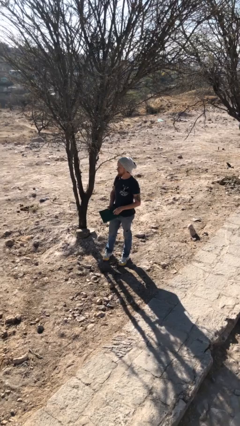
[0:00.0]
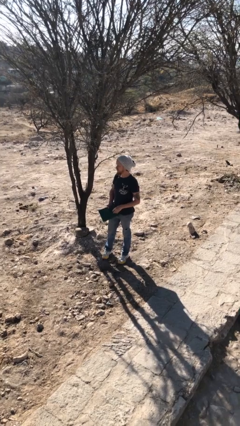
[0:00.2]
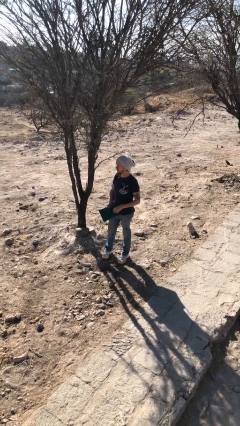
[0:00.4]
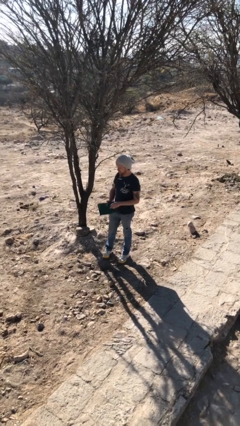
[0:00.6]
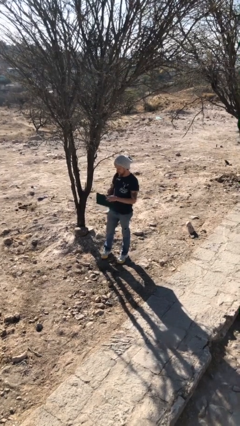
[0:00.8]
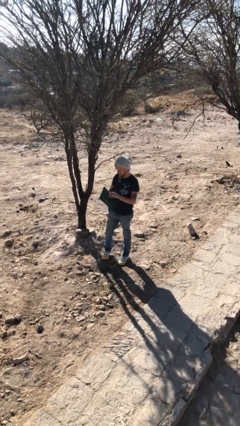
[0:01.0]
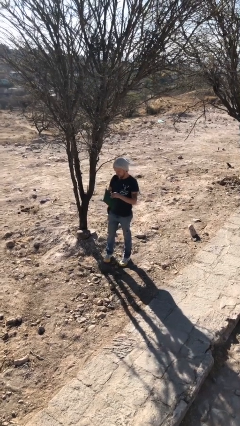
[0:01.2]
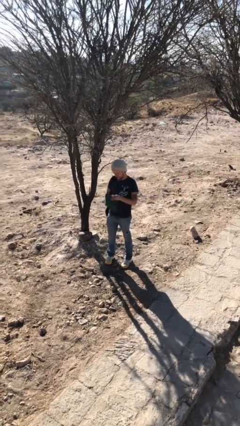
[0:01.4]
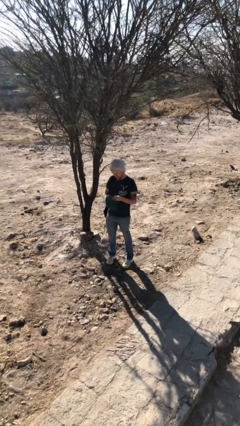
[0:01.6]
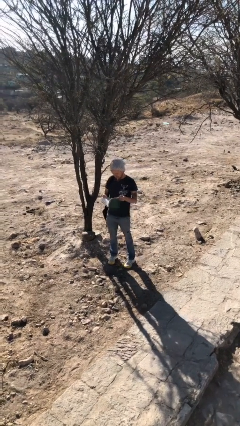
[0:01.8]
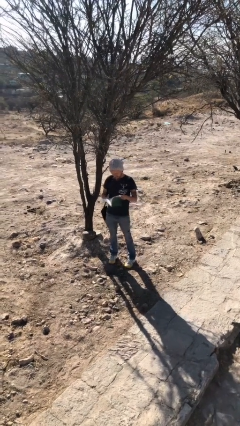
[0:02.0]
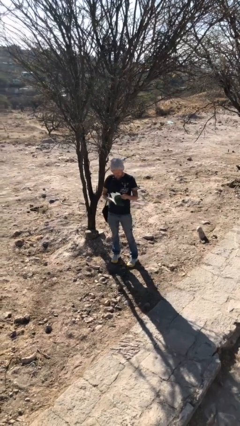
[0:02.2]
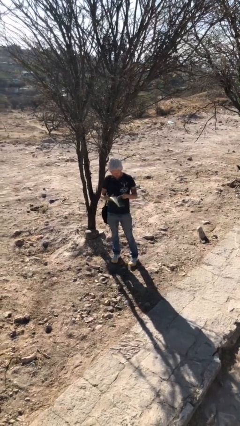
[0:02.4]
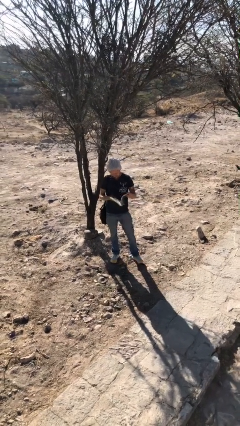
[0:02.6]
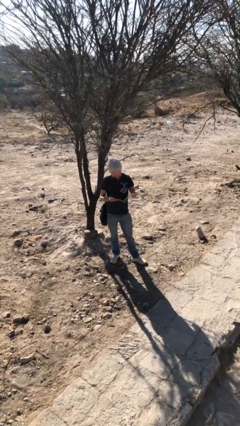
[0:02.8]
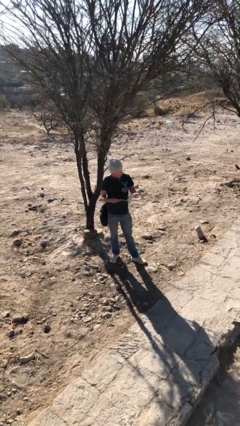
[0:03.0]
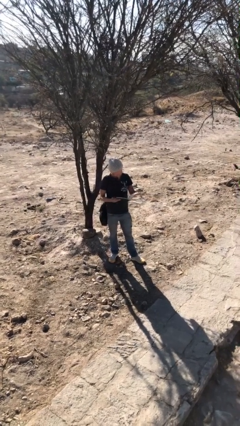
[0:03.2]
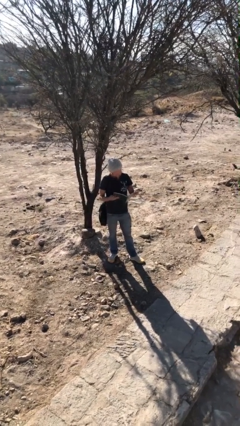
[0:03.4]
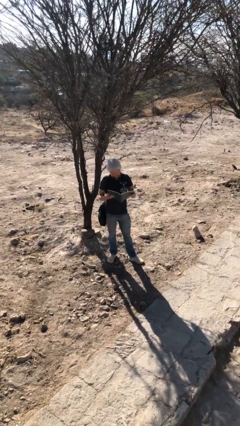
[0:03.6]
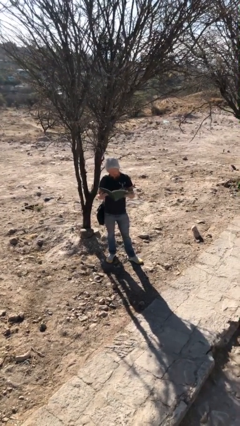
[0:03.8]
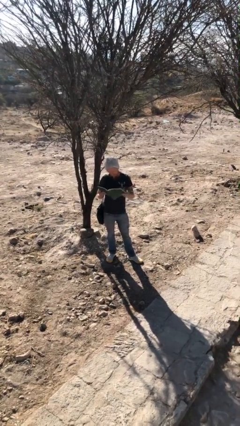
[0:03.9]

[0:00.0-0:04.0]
person reads document

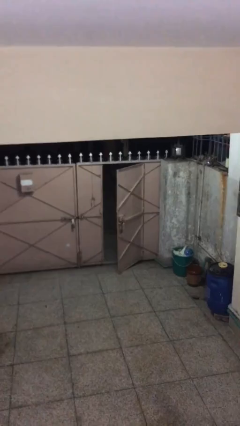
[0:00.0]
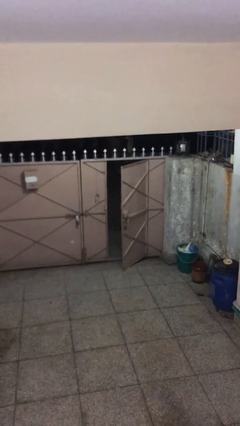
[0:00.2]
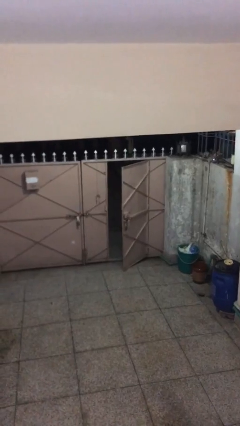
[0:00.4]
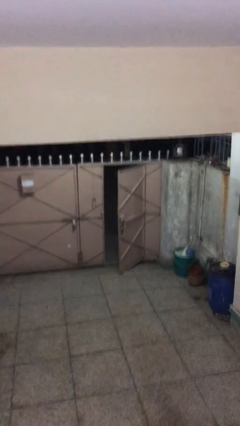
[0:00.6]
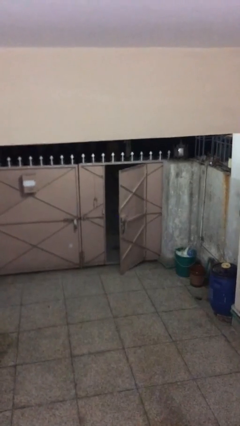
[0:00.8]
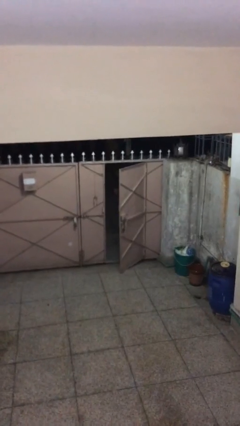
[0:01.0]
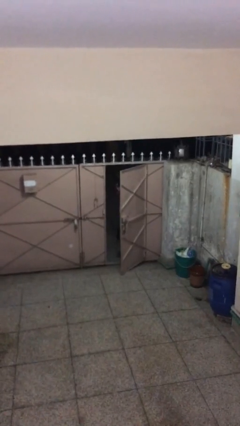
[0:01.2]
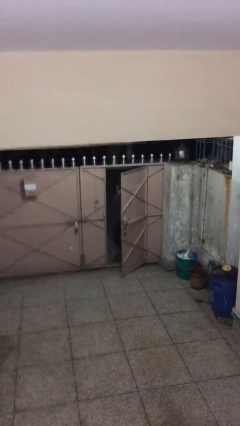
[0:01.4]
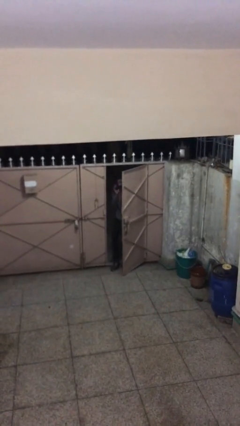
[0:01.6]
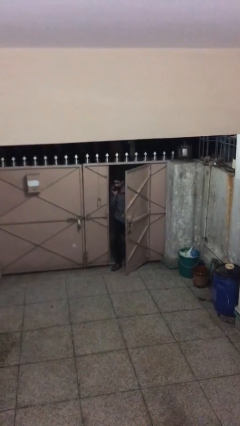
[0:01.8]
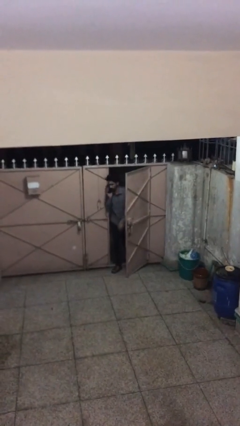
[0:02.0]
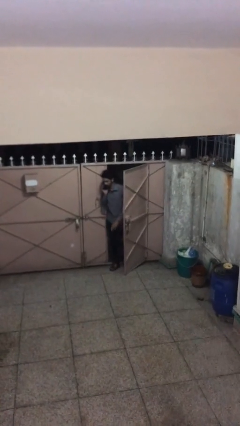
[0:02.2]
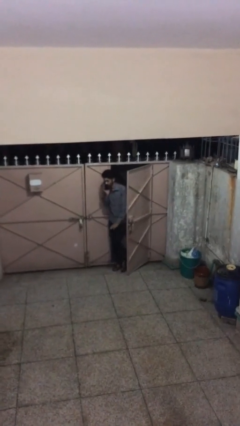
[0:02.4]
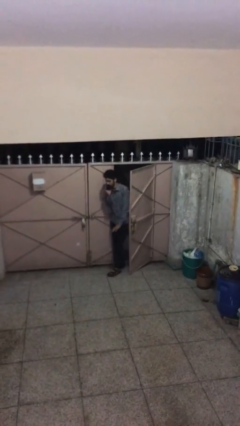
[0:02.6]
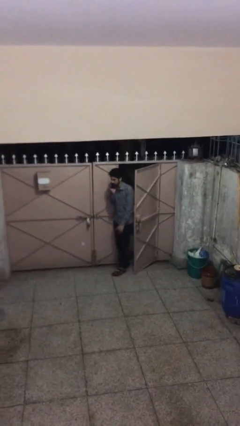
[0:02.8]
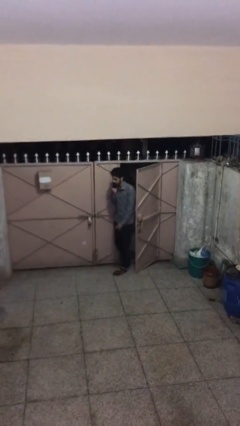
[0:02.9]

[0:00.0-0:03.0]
person enters scene through structure

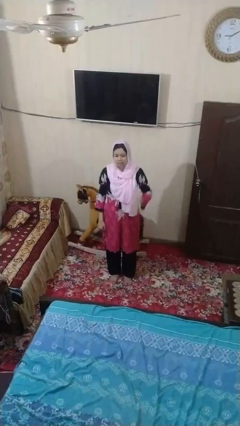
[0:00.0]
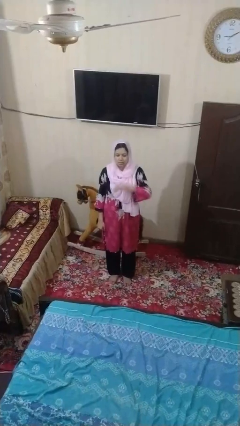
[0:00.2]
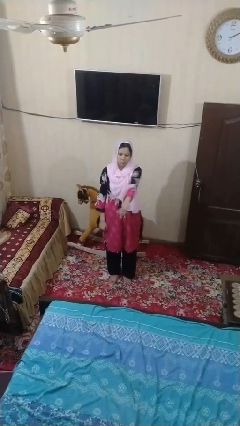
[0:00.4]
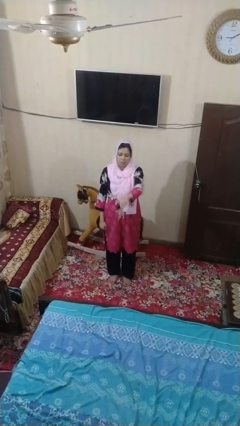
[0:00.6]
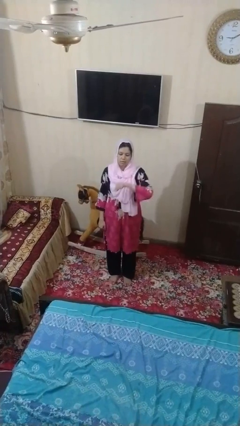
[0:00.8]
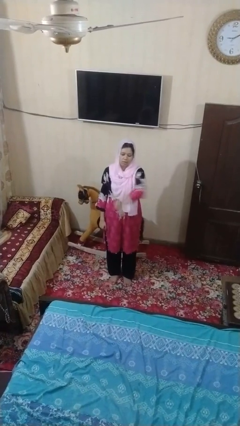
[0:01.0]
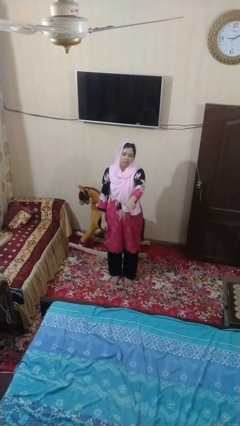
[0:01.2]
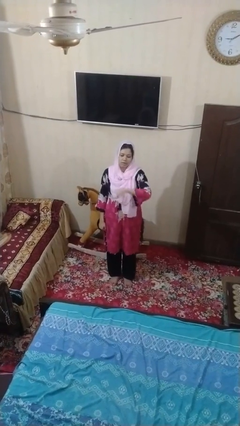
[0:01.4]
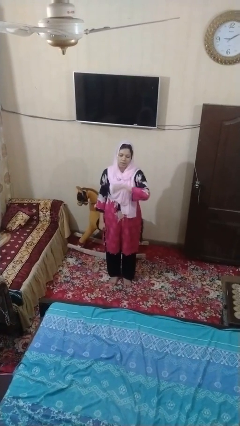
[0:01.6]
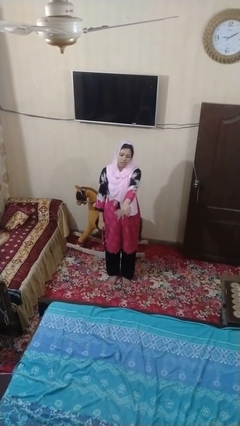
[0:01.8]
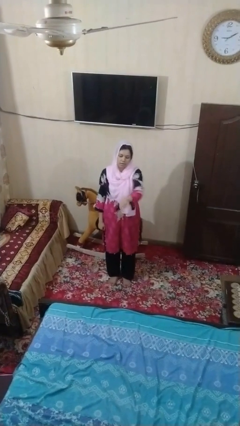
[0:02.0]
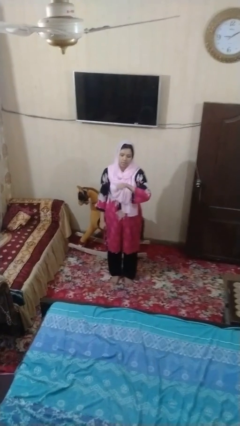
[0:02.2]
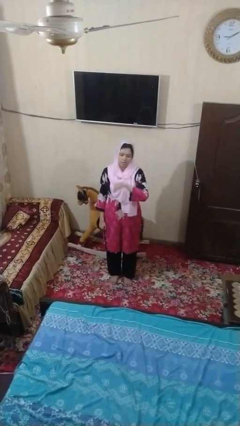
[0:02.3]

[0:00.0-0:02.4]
person punches

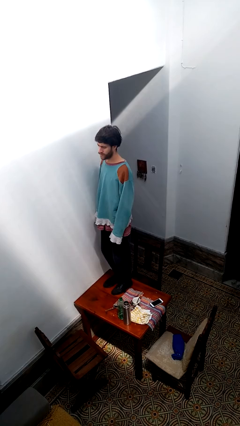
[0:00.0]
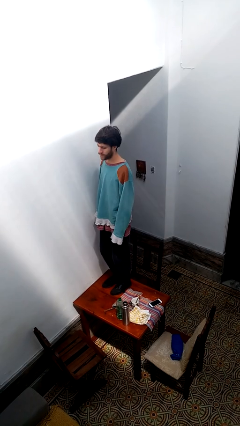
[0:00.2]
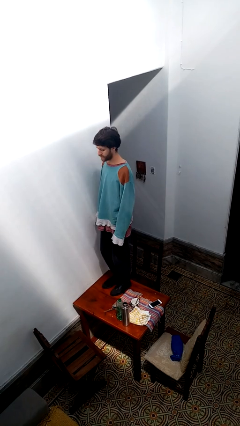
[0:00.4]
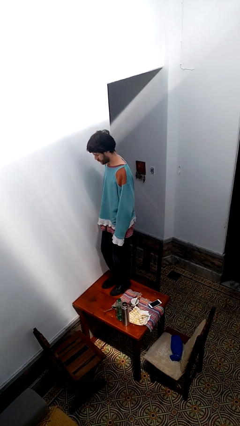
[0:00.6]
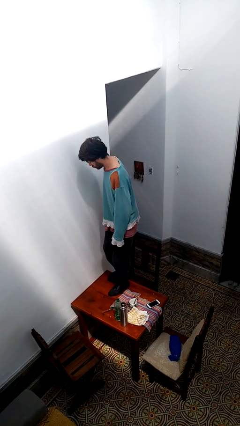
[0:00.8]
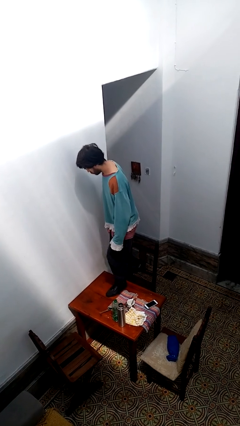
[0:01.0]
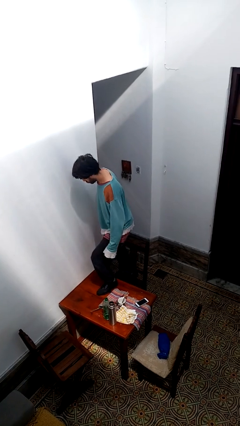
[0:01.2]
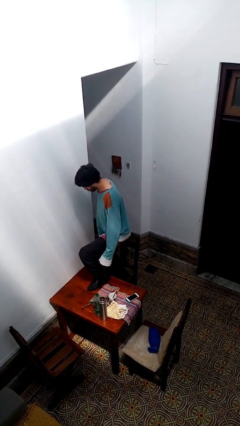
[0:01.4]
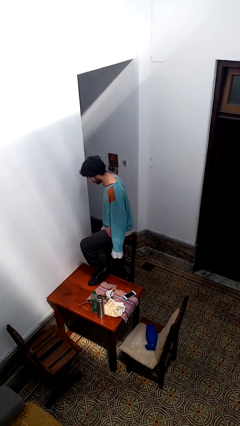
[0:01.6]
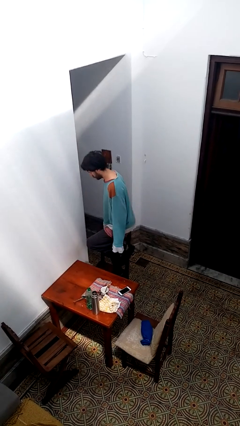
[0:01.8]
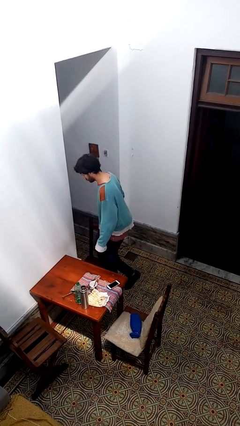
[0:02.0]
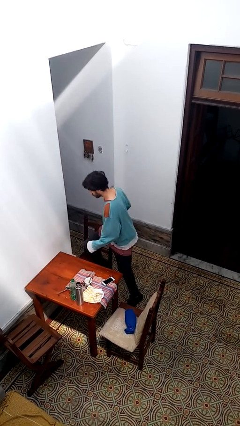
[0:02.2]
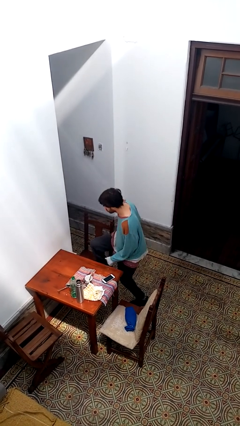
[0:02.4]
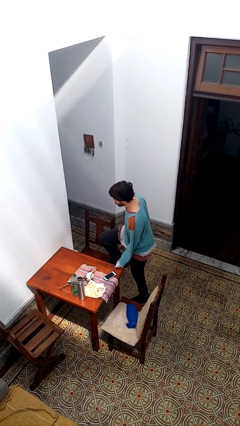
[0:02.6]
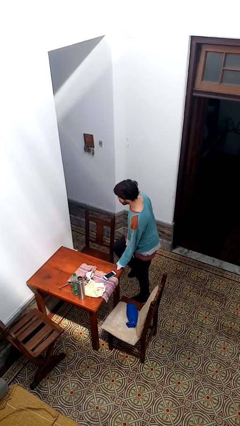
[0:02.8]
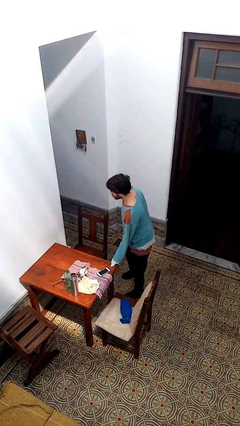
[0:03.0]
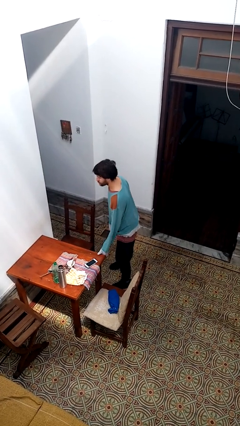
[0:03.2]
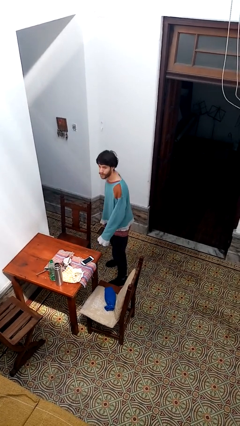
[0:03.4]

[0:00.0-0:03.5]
person climbs off table

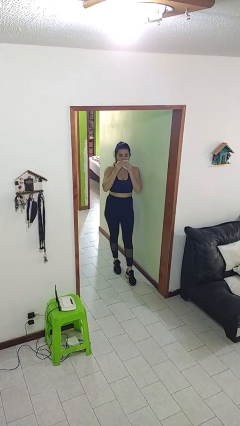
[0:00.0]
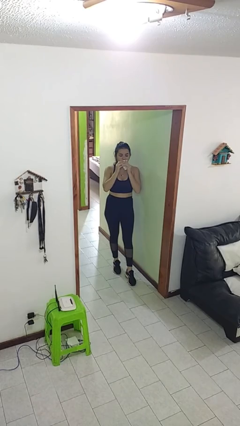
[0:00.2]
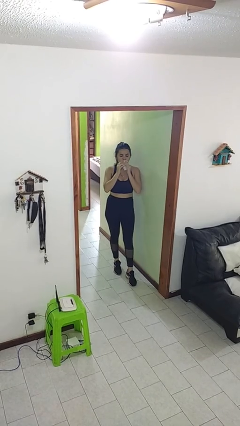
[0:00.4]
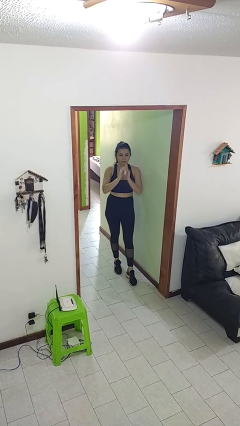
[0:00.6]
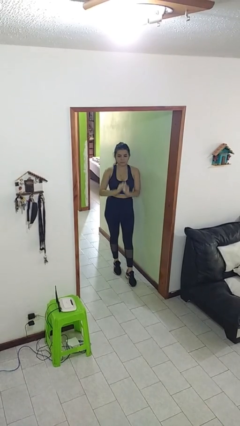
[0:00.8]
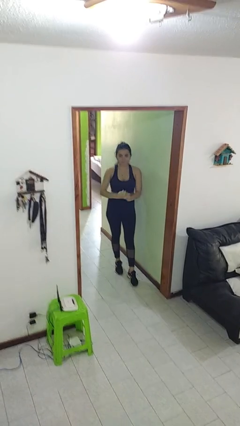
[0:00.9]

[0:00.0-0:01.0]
person wipes mouth with napkin

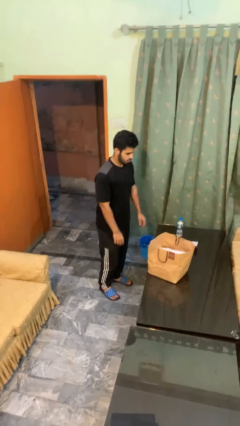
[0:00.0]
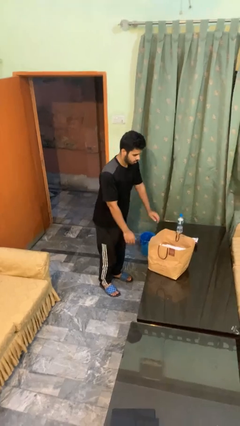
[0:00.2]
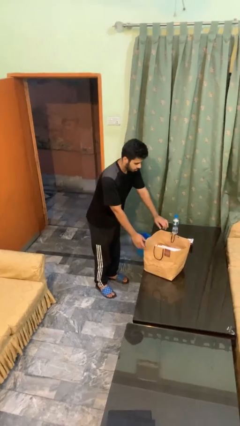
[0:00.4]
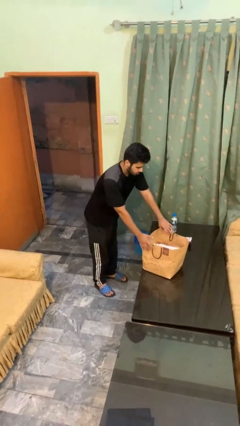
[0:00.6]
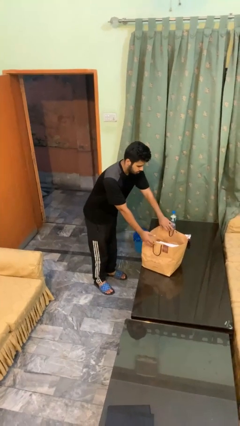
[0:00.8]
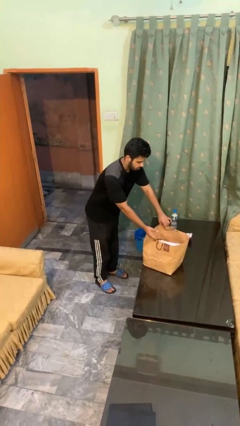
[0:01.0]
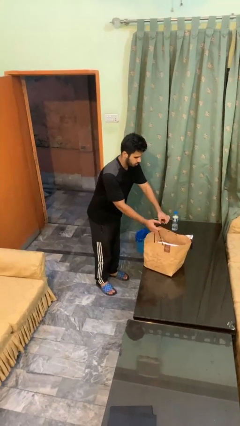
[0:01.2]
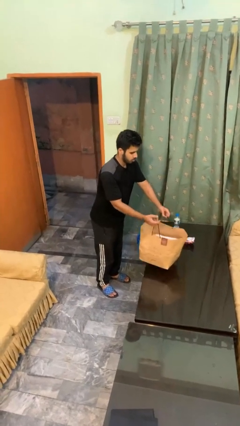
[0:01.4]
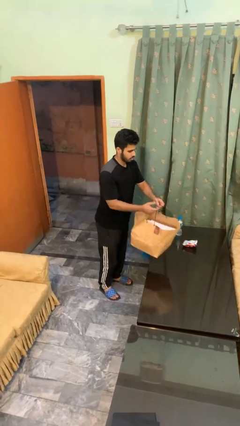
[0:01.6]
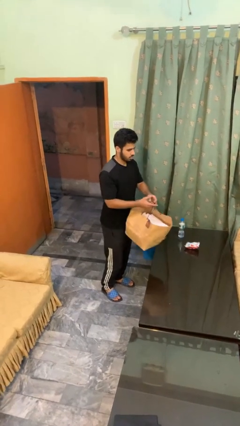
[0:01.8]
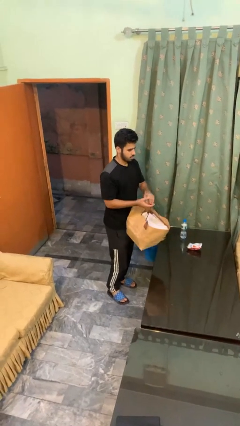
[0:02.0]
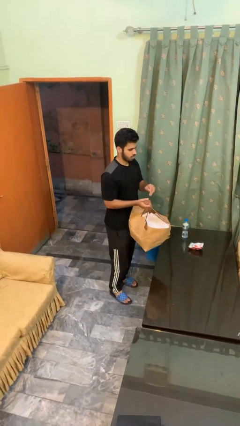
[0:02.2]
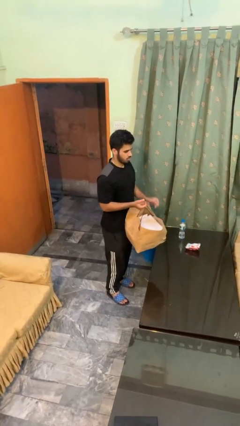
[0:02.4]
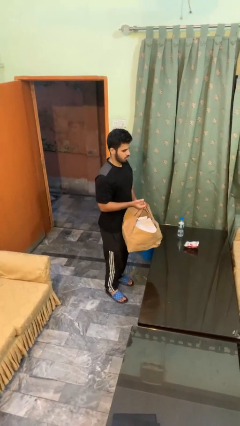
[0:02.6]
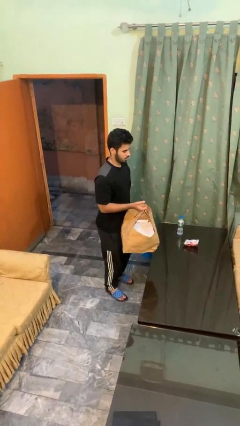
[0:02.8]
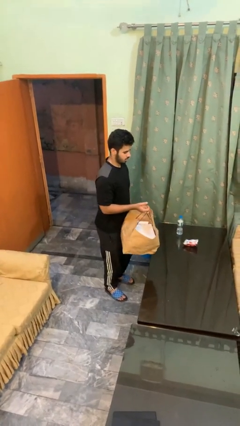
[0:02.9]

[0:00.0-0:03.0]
person picks up object from countertop

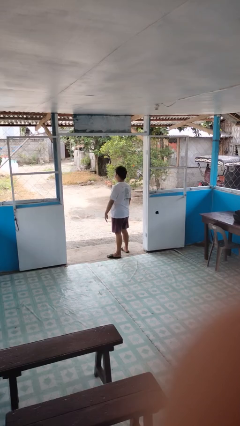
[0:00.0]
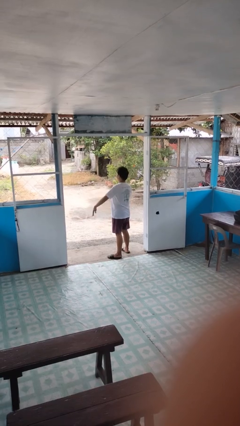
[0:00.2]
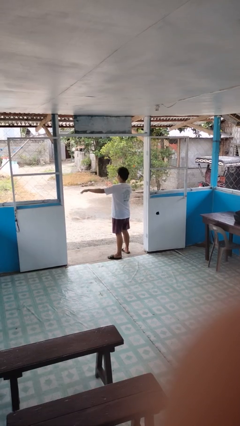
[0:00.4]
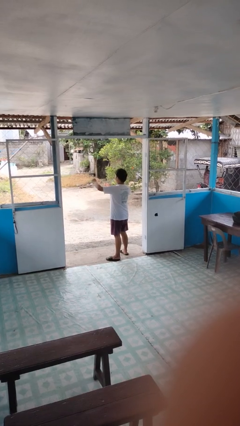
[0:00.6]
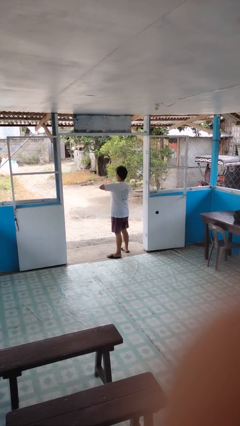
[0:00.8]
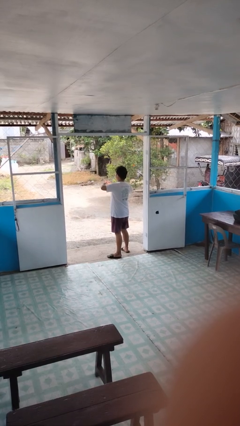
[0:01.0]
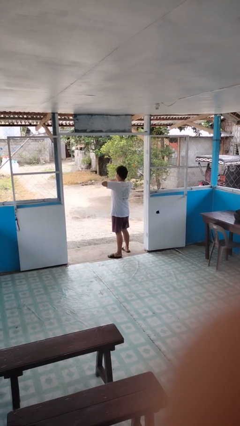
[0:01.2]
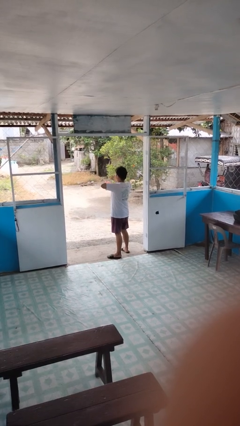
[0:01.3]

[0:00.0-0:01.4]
person drums on chest
